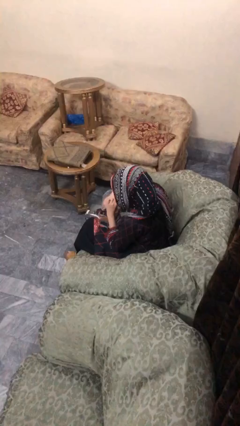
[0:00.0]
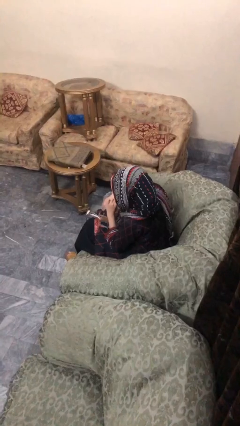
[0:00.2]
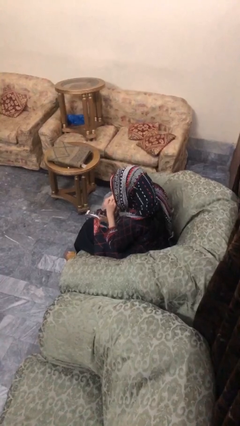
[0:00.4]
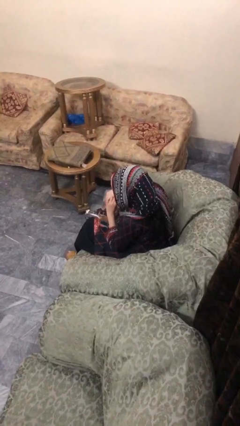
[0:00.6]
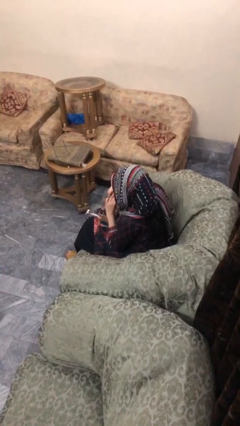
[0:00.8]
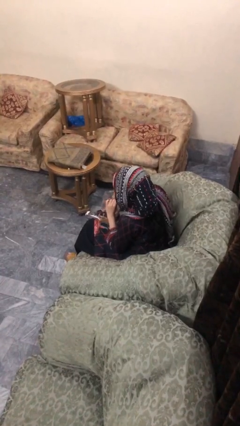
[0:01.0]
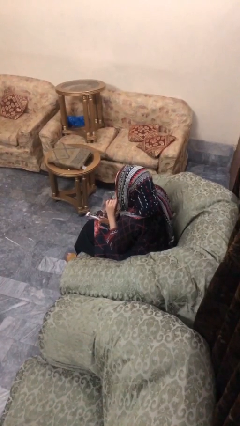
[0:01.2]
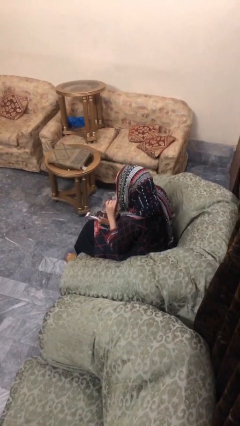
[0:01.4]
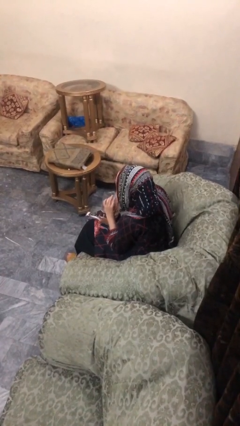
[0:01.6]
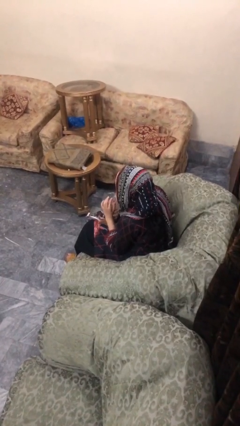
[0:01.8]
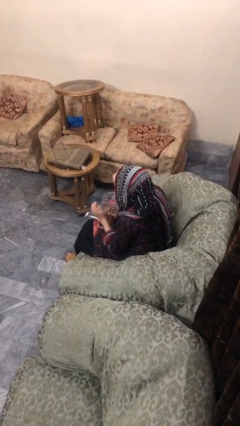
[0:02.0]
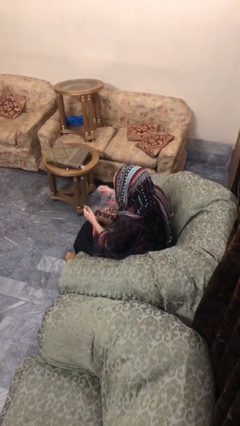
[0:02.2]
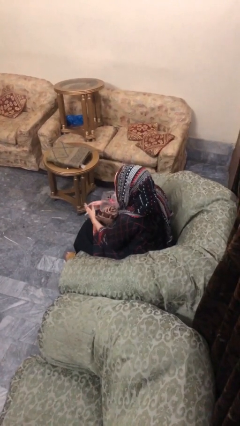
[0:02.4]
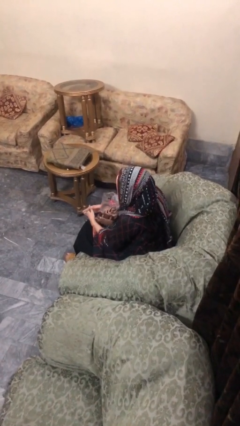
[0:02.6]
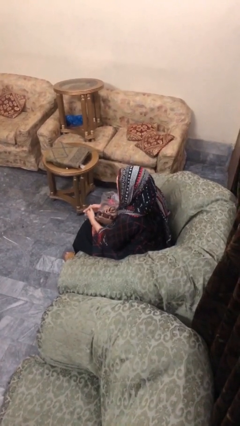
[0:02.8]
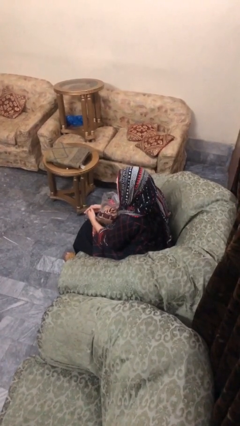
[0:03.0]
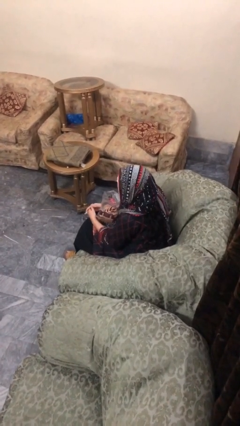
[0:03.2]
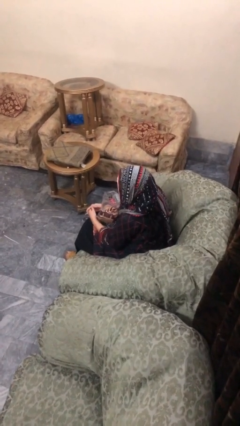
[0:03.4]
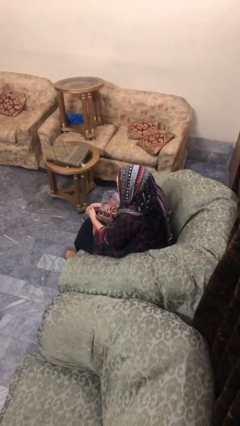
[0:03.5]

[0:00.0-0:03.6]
person eats snack from bag

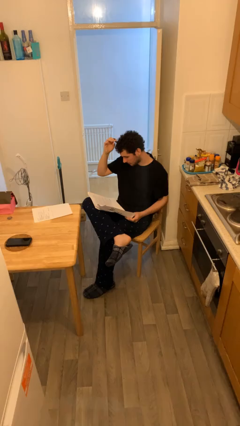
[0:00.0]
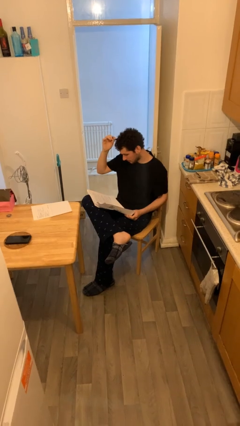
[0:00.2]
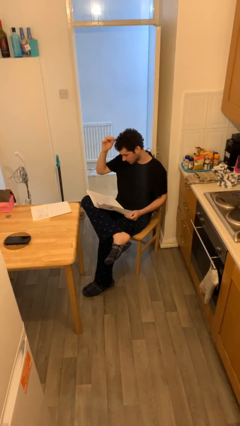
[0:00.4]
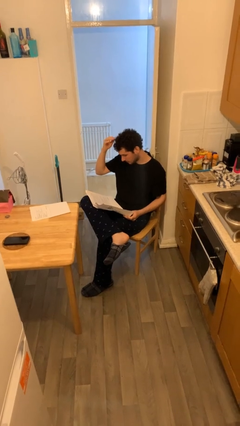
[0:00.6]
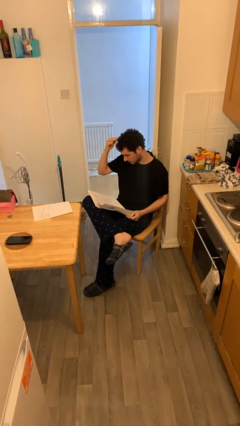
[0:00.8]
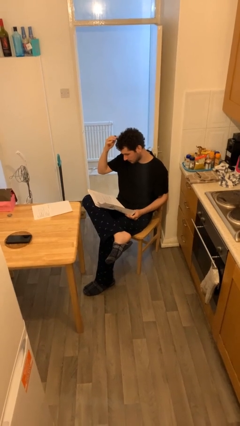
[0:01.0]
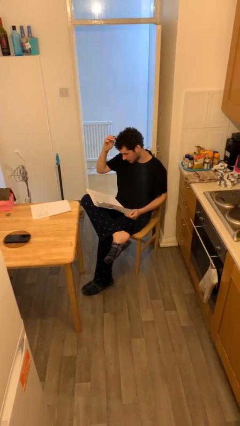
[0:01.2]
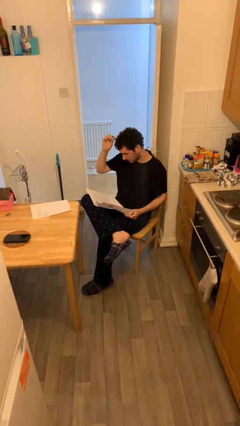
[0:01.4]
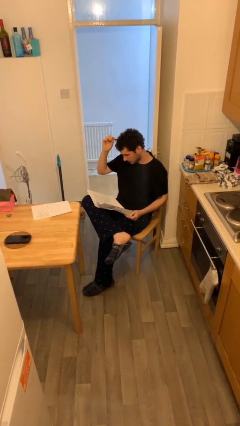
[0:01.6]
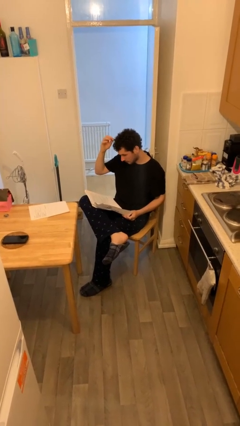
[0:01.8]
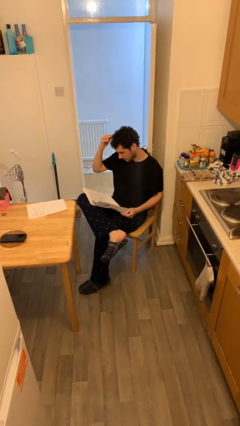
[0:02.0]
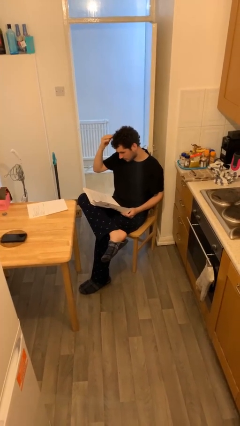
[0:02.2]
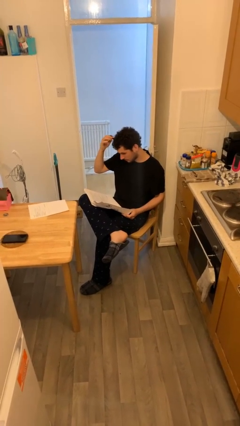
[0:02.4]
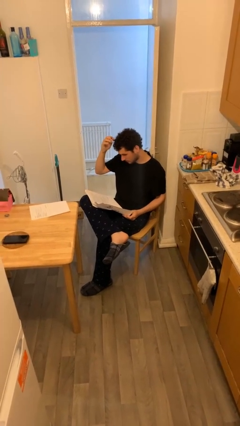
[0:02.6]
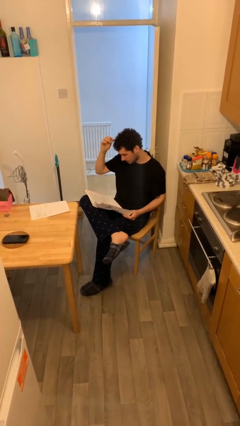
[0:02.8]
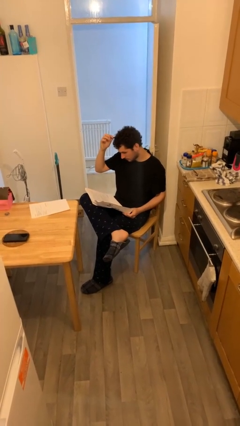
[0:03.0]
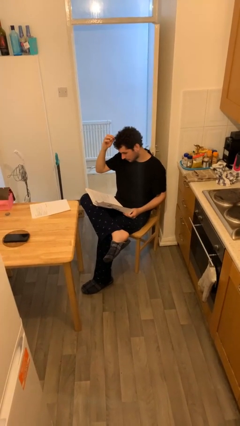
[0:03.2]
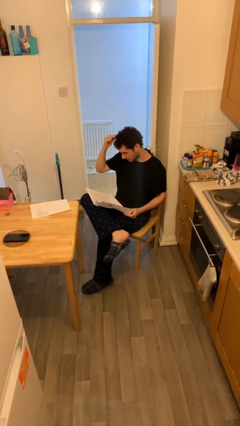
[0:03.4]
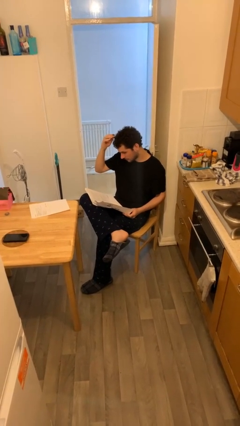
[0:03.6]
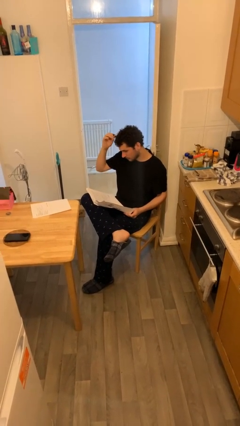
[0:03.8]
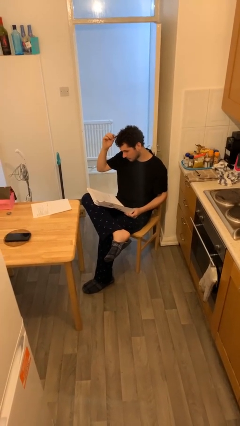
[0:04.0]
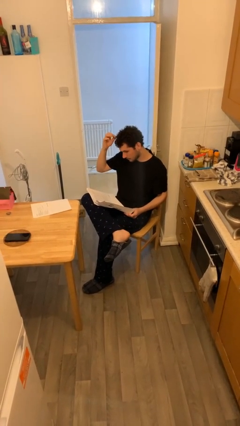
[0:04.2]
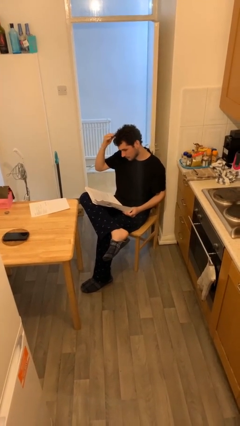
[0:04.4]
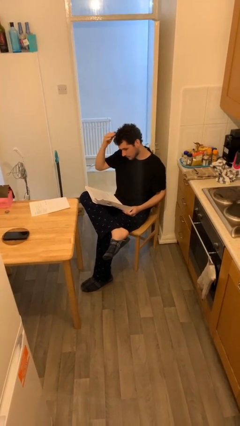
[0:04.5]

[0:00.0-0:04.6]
person reads document

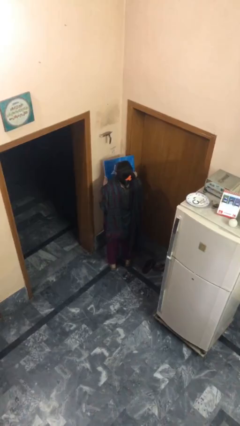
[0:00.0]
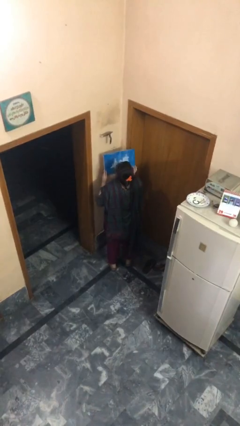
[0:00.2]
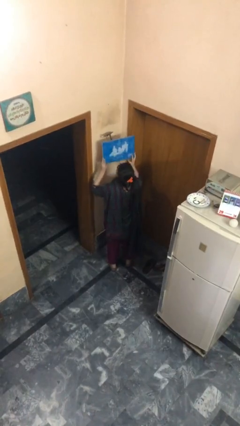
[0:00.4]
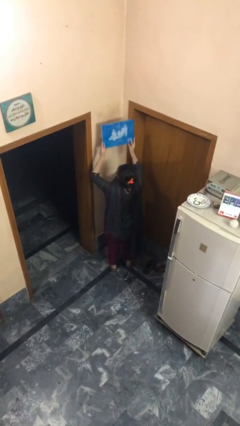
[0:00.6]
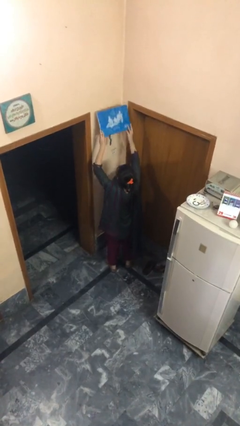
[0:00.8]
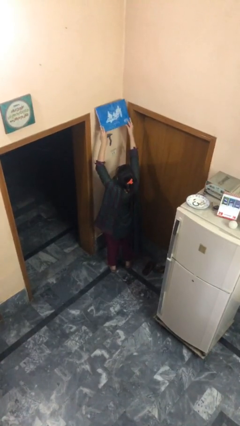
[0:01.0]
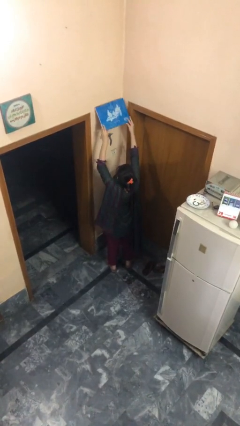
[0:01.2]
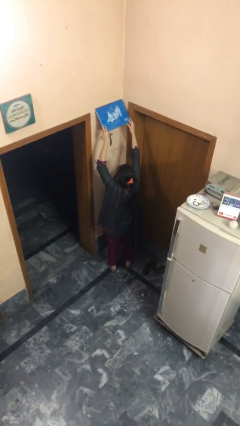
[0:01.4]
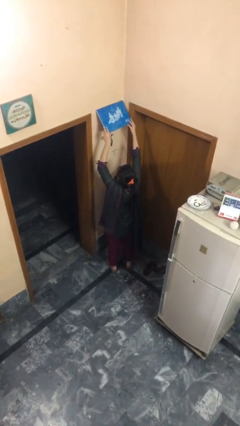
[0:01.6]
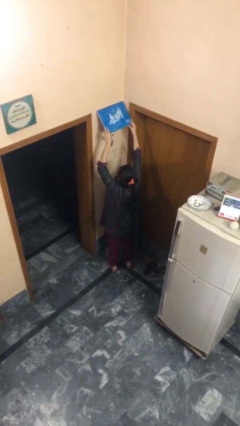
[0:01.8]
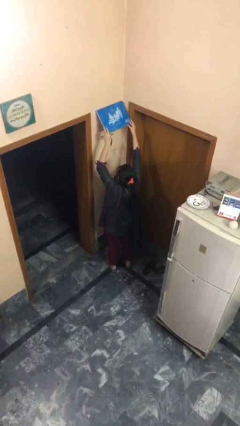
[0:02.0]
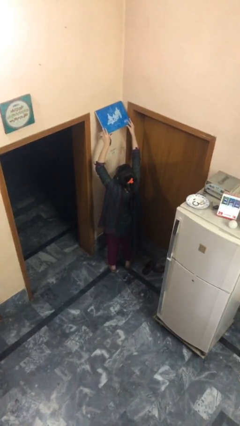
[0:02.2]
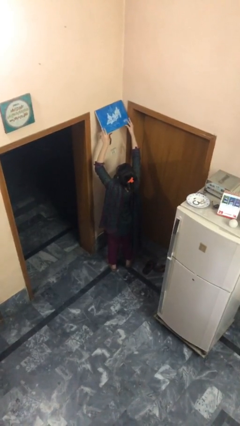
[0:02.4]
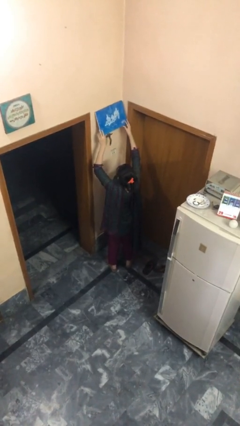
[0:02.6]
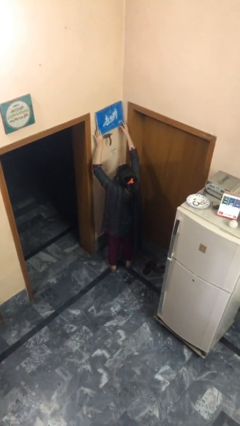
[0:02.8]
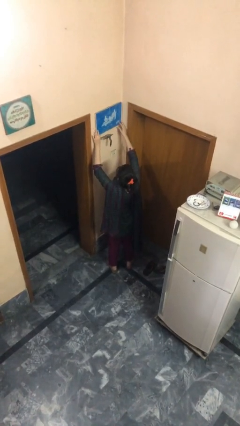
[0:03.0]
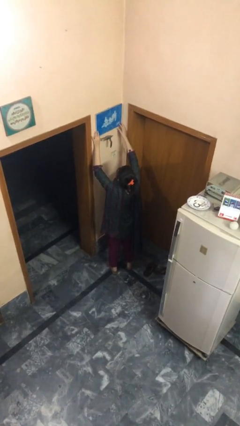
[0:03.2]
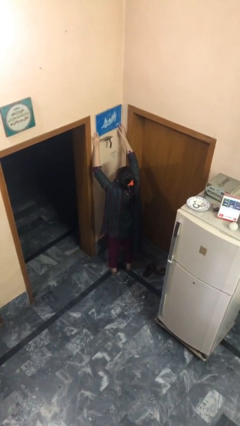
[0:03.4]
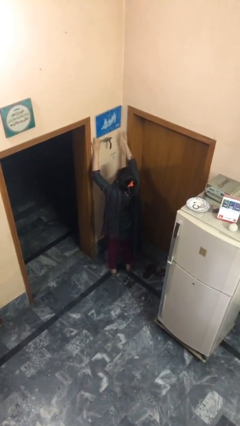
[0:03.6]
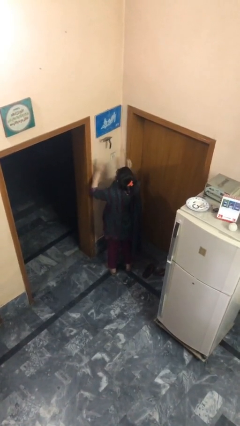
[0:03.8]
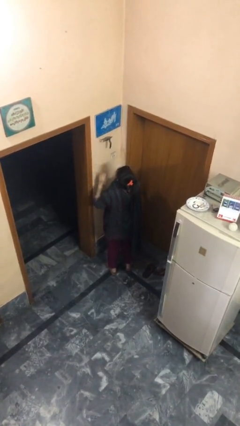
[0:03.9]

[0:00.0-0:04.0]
person puts up picture frame

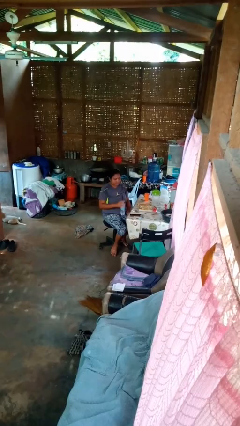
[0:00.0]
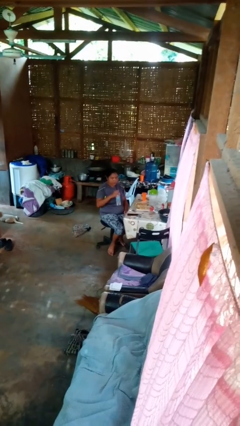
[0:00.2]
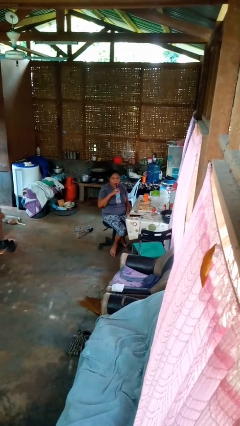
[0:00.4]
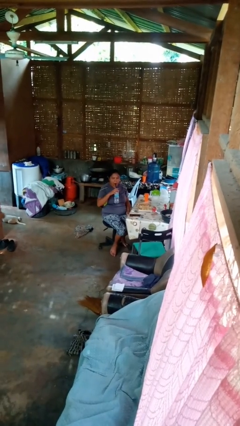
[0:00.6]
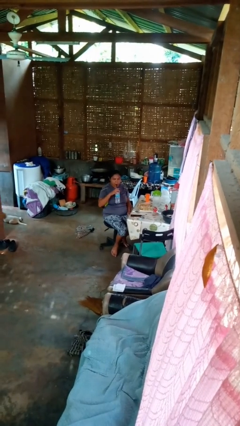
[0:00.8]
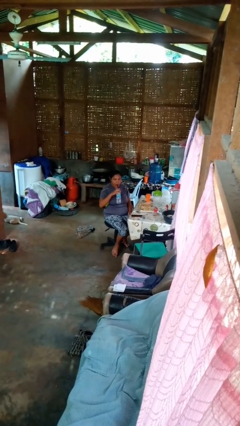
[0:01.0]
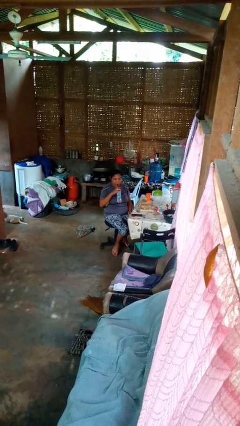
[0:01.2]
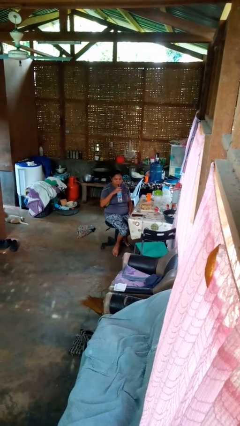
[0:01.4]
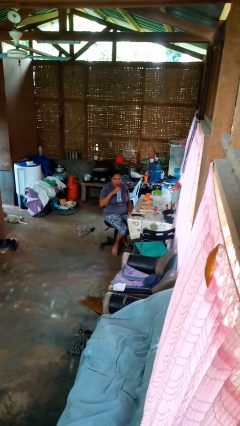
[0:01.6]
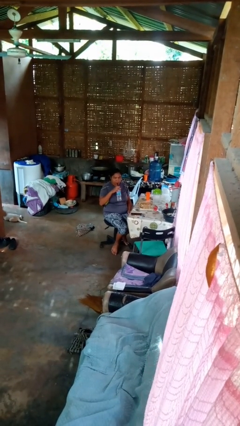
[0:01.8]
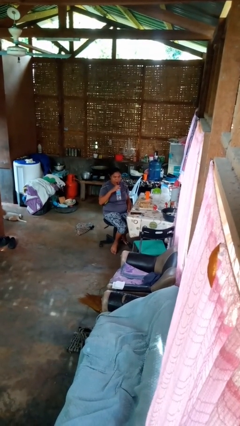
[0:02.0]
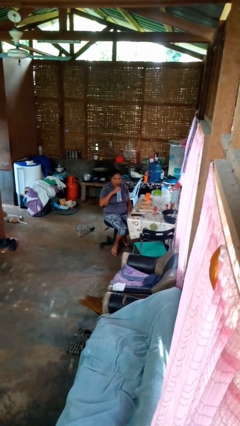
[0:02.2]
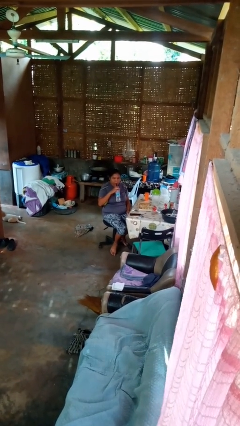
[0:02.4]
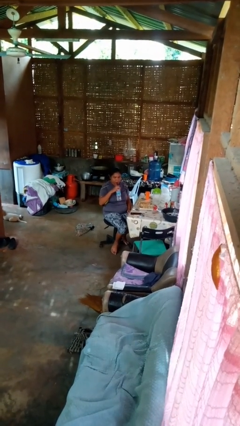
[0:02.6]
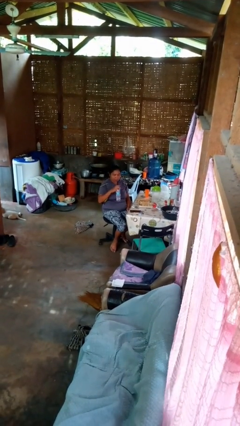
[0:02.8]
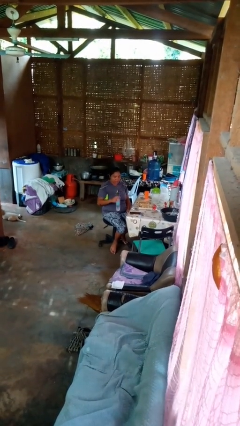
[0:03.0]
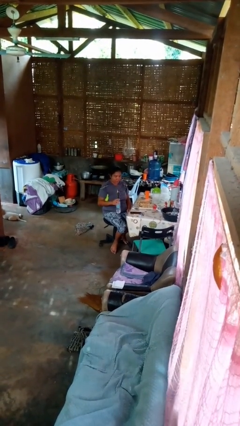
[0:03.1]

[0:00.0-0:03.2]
person drinks from straw

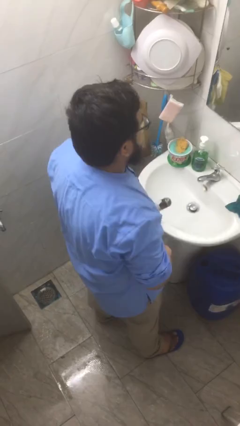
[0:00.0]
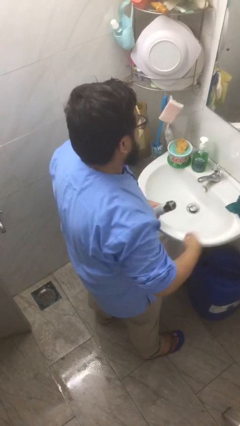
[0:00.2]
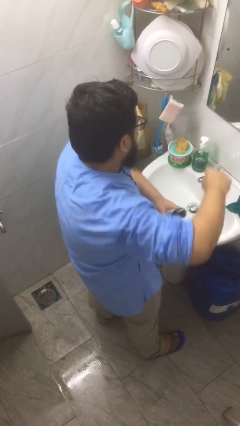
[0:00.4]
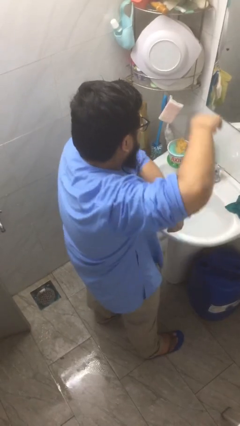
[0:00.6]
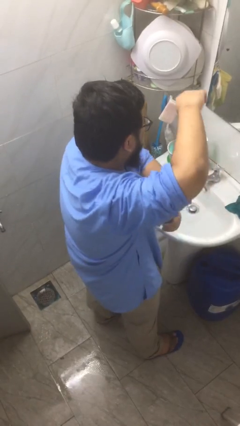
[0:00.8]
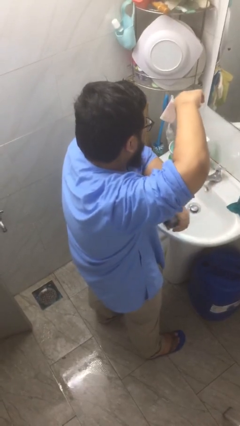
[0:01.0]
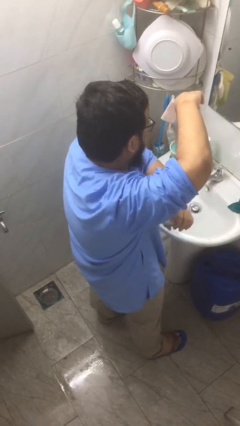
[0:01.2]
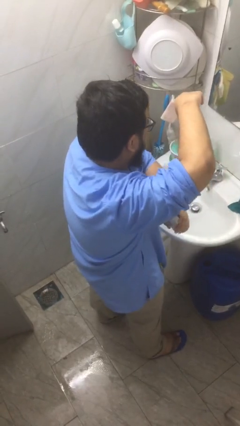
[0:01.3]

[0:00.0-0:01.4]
person applies deodorant

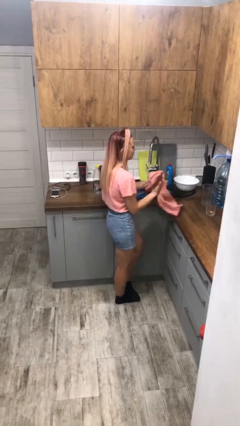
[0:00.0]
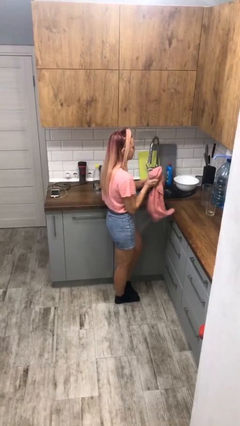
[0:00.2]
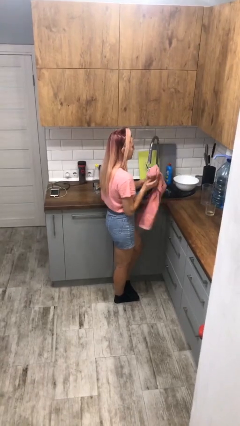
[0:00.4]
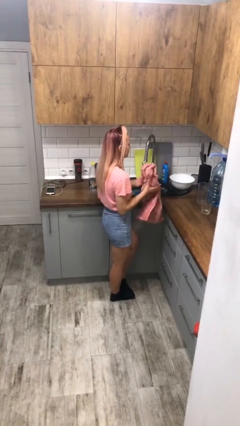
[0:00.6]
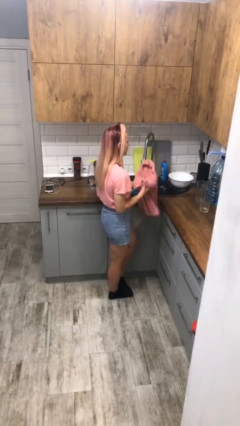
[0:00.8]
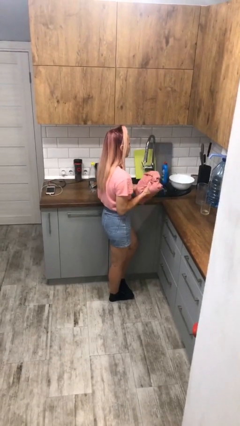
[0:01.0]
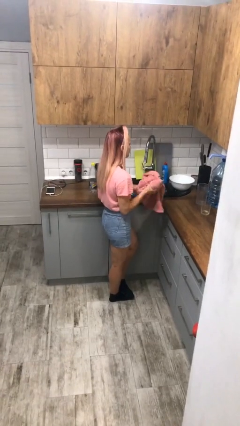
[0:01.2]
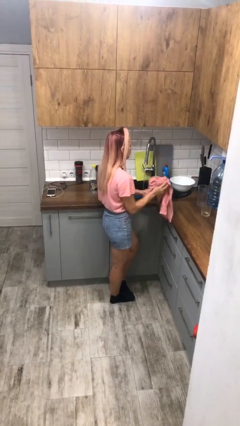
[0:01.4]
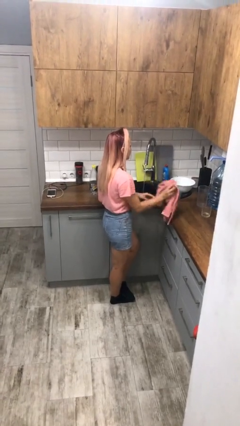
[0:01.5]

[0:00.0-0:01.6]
person dries hands with towel
